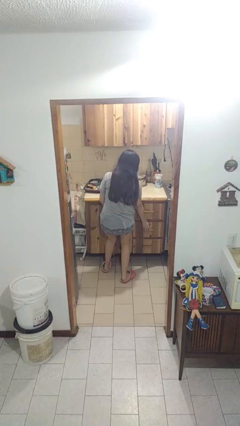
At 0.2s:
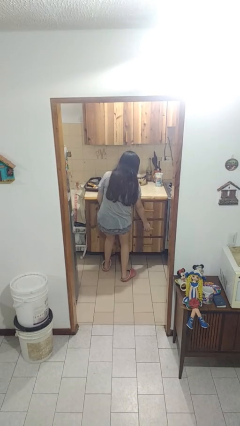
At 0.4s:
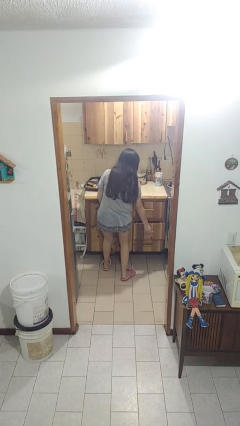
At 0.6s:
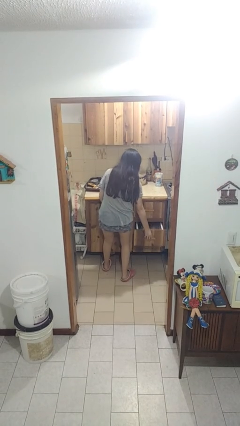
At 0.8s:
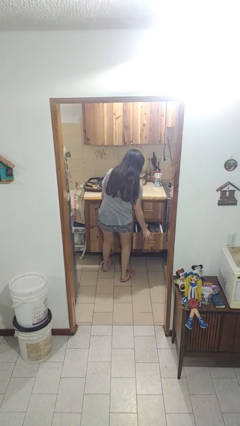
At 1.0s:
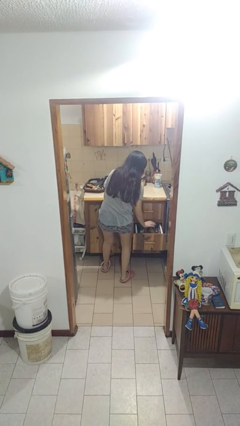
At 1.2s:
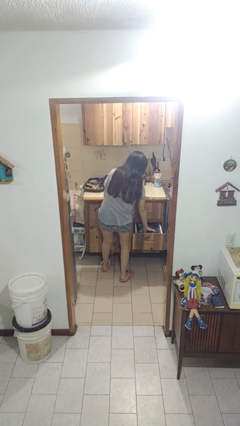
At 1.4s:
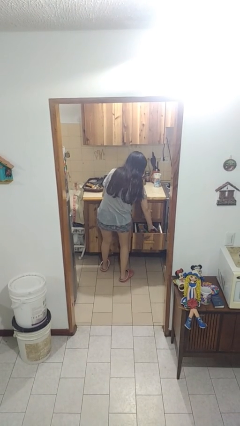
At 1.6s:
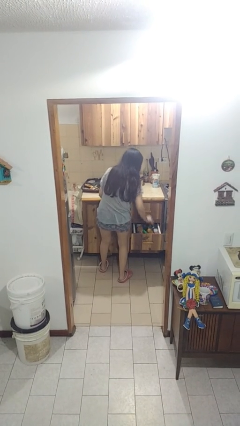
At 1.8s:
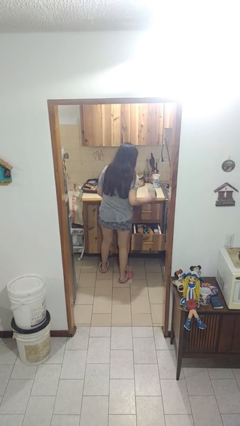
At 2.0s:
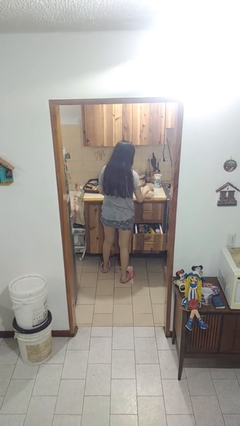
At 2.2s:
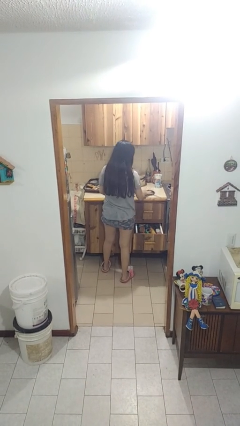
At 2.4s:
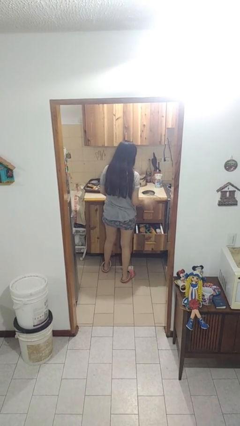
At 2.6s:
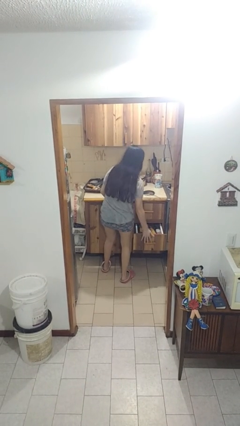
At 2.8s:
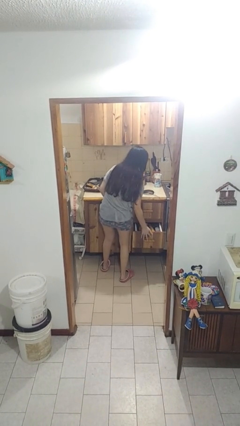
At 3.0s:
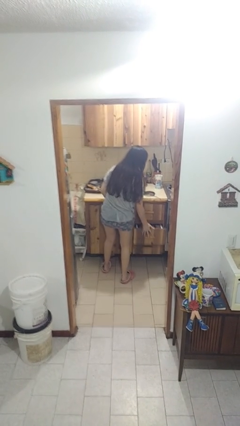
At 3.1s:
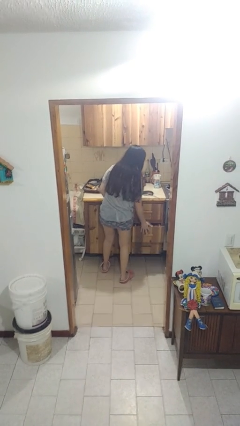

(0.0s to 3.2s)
person takes object from kitchen drawer

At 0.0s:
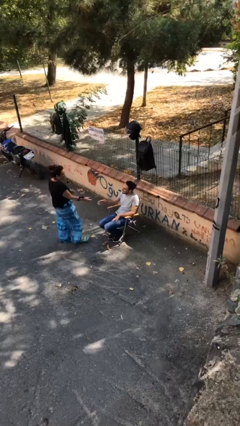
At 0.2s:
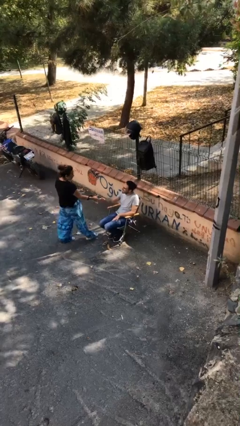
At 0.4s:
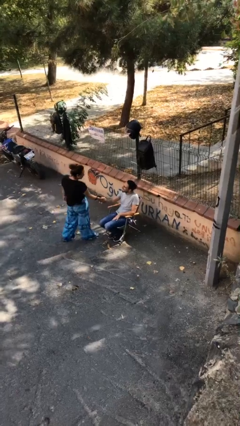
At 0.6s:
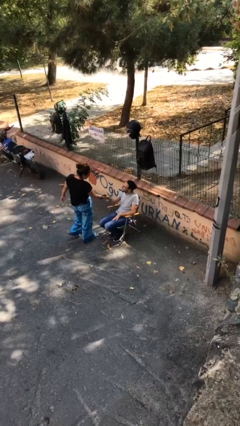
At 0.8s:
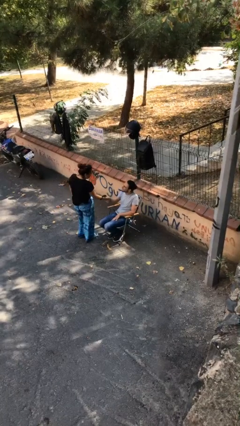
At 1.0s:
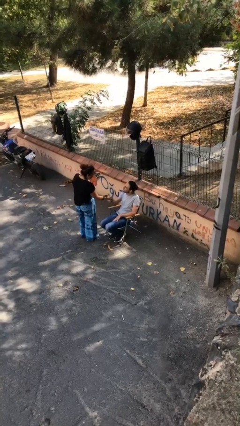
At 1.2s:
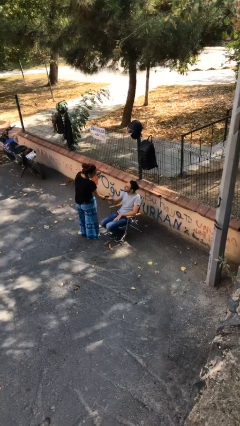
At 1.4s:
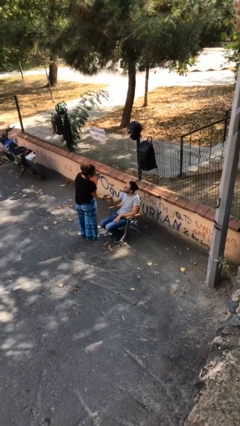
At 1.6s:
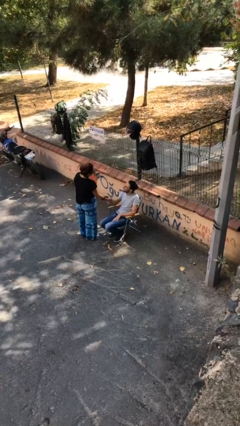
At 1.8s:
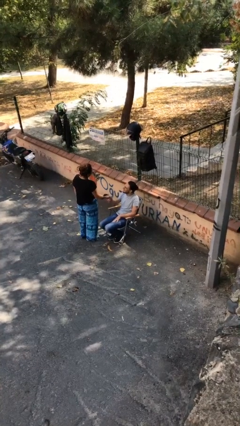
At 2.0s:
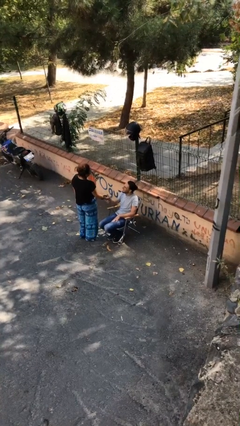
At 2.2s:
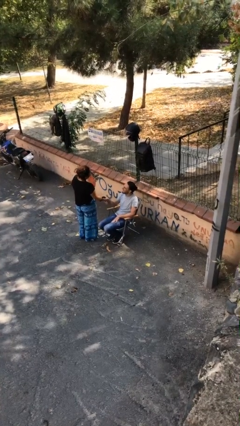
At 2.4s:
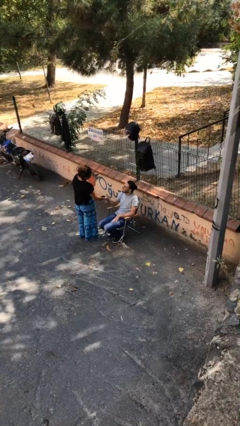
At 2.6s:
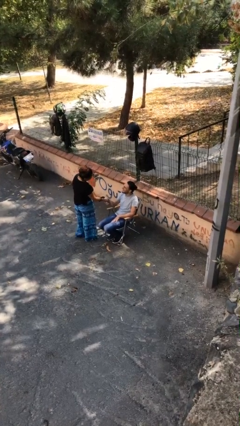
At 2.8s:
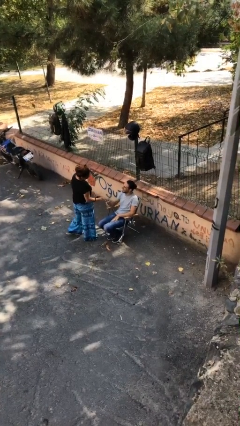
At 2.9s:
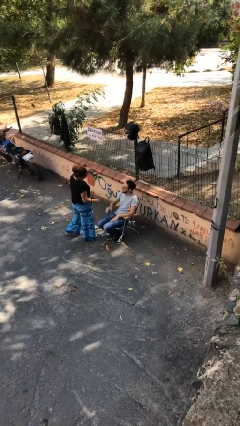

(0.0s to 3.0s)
person shakes hand

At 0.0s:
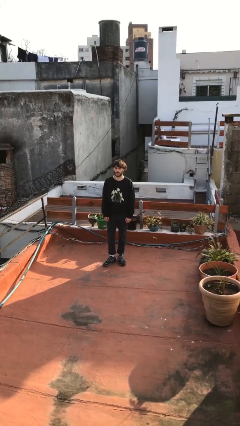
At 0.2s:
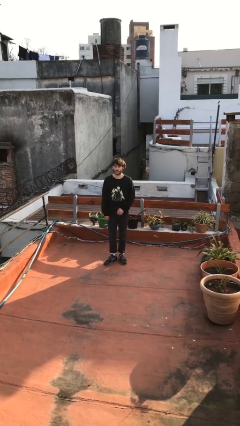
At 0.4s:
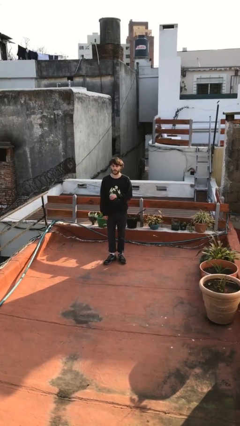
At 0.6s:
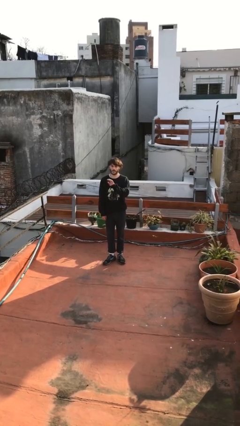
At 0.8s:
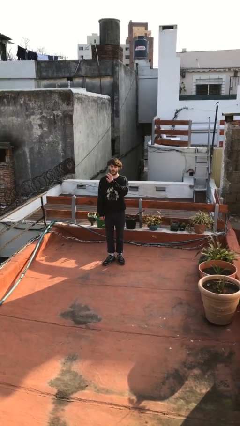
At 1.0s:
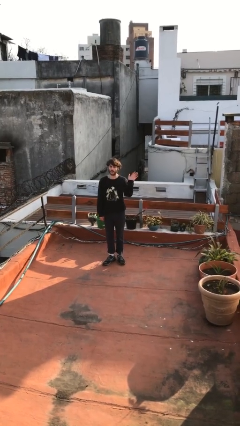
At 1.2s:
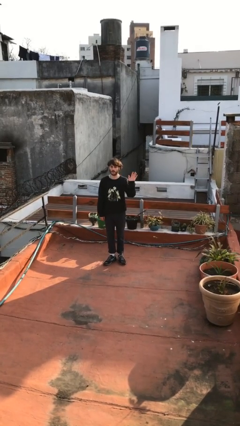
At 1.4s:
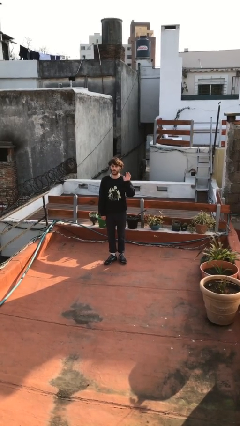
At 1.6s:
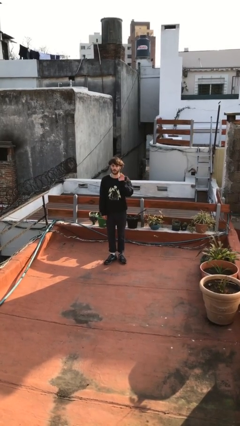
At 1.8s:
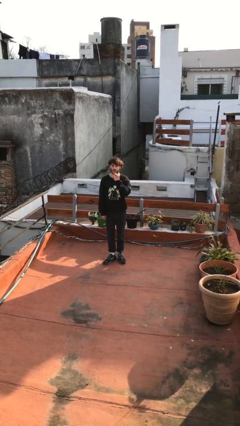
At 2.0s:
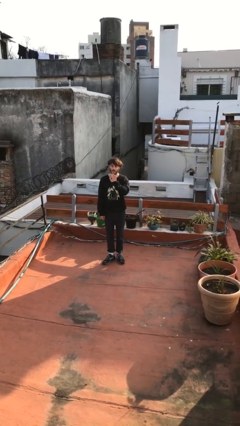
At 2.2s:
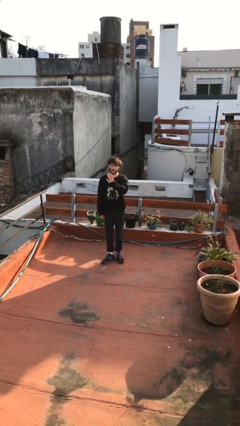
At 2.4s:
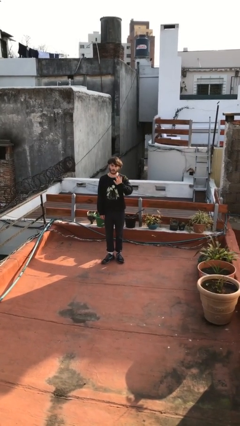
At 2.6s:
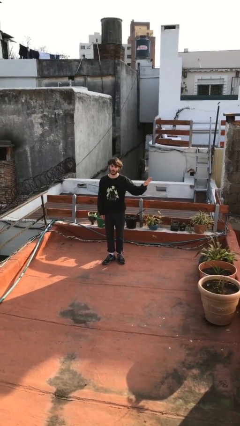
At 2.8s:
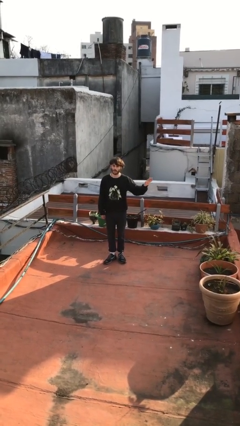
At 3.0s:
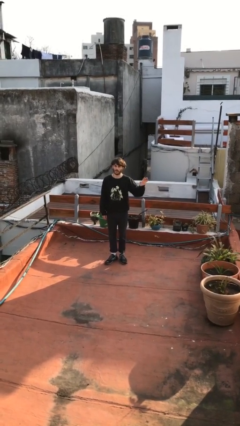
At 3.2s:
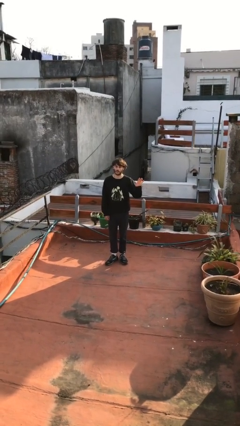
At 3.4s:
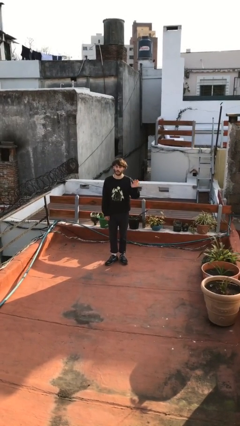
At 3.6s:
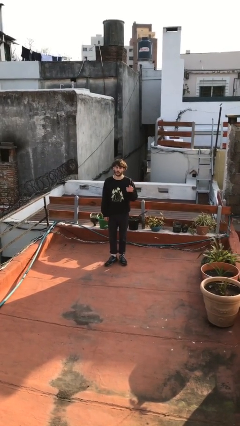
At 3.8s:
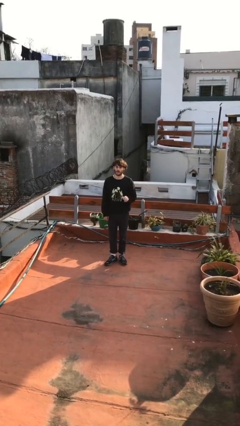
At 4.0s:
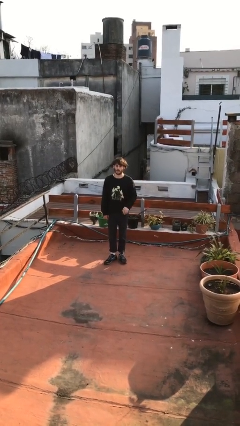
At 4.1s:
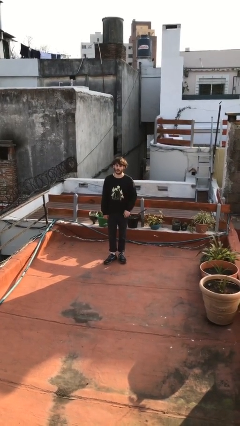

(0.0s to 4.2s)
person gestures swipe left

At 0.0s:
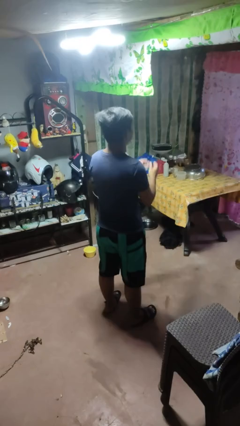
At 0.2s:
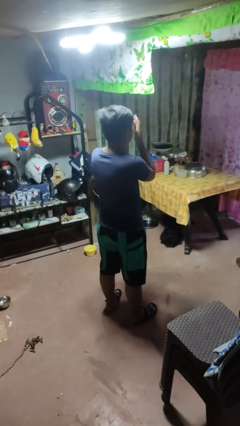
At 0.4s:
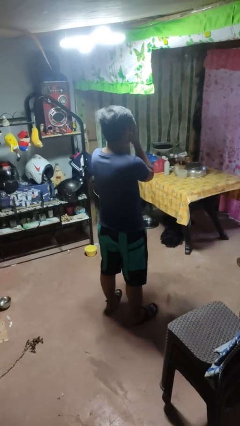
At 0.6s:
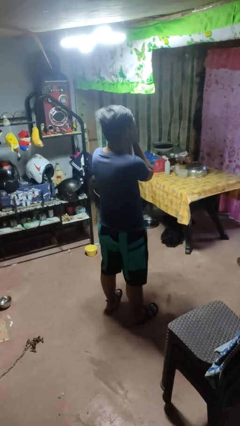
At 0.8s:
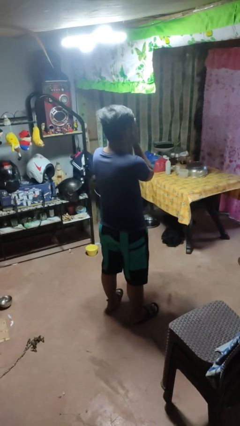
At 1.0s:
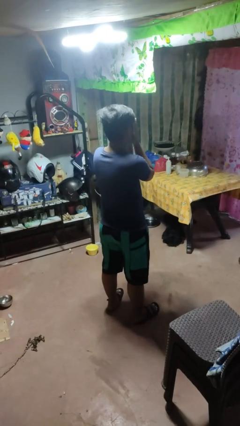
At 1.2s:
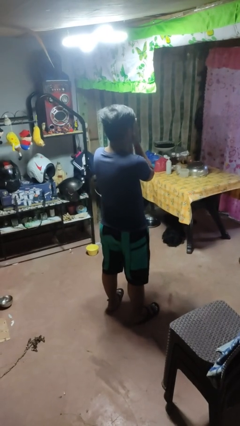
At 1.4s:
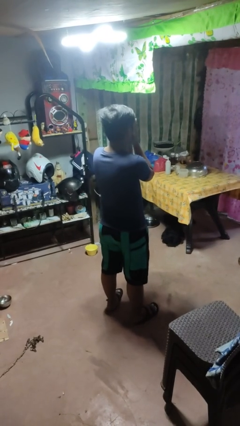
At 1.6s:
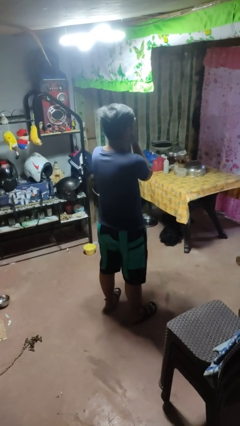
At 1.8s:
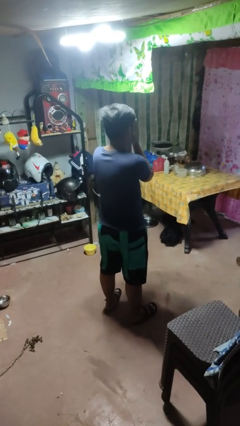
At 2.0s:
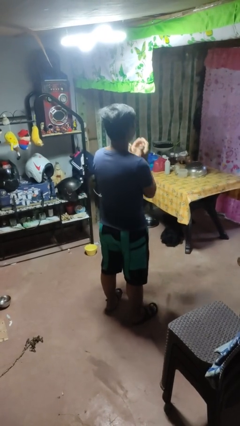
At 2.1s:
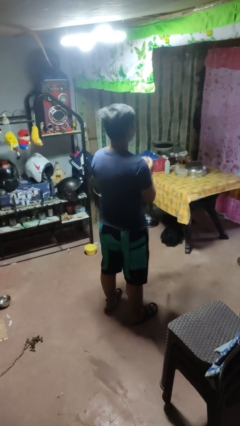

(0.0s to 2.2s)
person covers face with hands

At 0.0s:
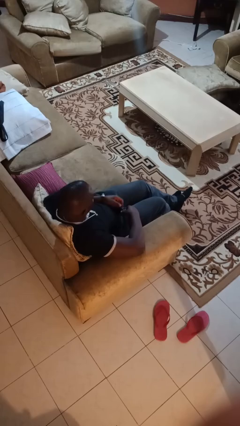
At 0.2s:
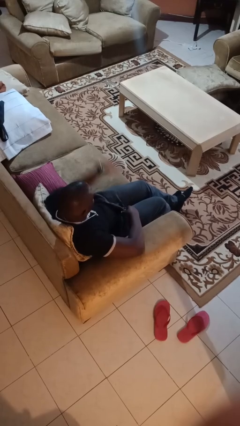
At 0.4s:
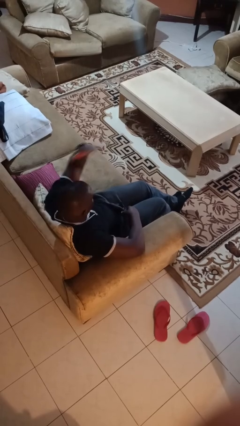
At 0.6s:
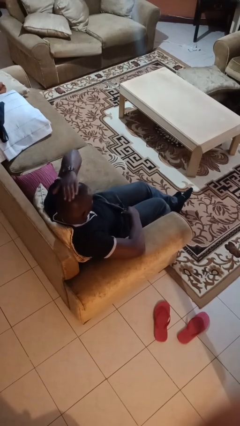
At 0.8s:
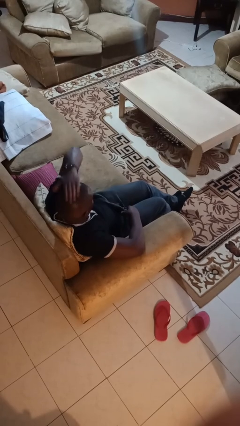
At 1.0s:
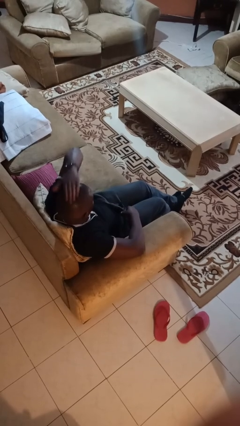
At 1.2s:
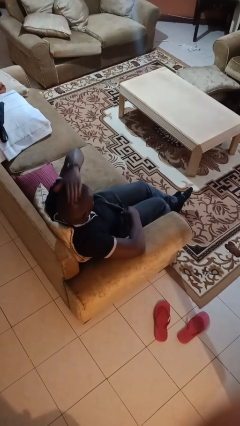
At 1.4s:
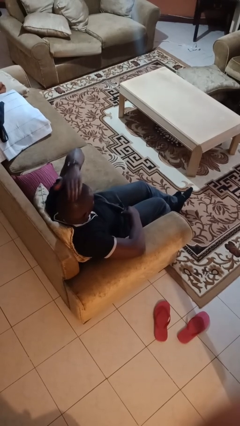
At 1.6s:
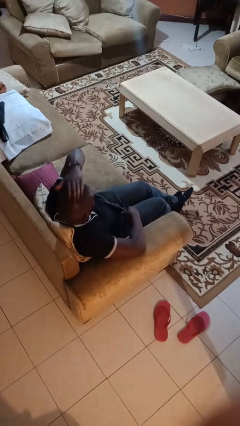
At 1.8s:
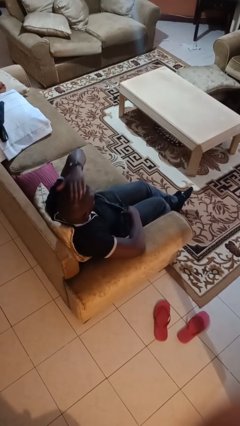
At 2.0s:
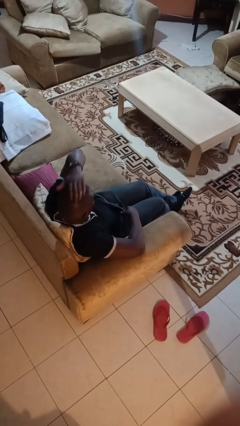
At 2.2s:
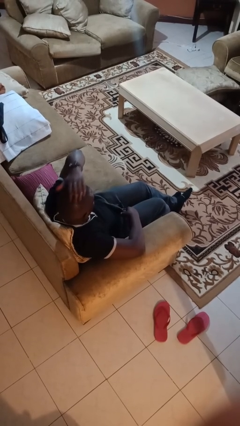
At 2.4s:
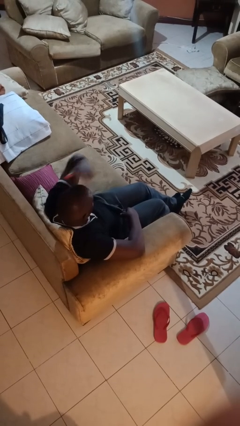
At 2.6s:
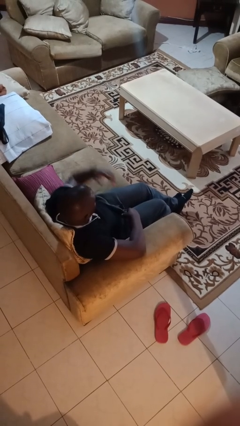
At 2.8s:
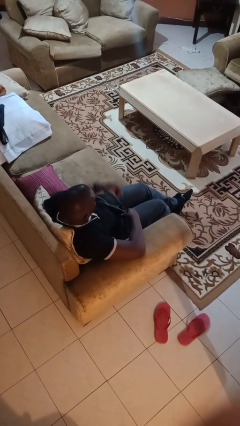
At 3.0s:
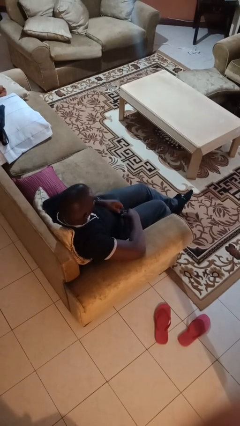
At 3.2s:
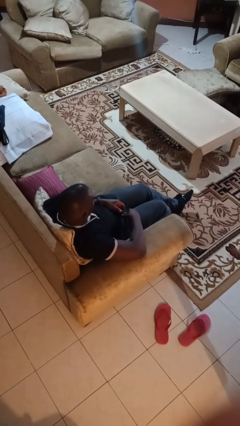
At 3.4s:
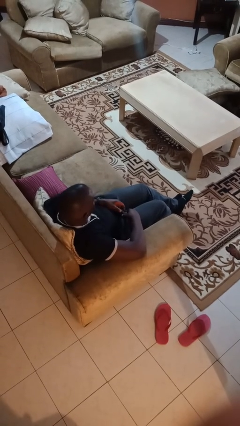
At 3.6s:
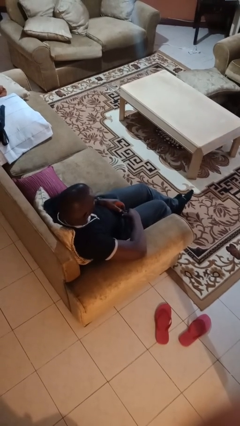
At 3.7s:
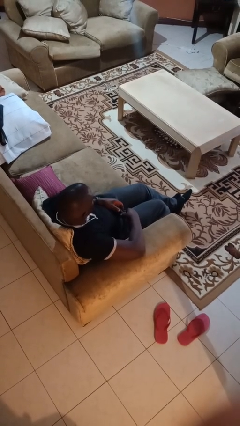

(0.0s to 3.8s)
person pats head

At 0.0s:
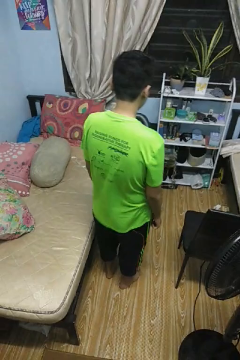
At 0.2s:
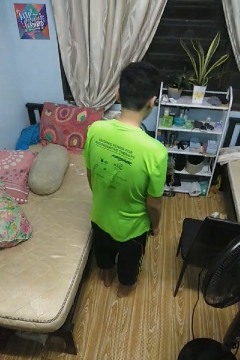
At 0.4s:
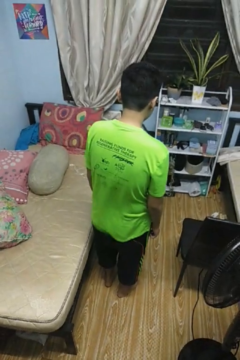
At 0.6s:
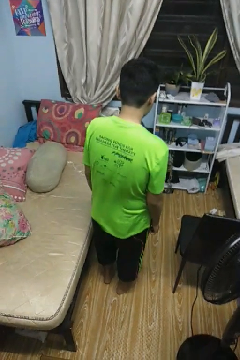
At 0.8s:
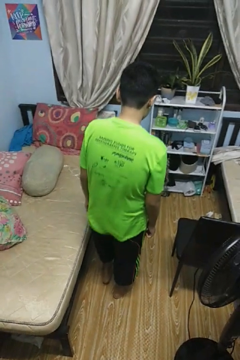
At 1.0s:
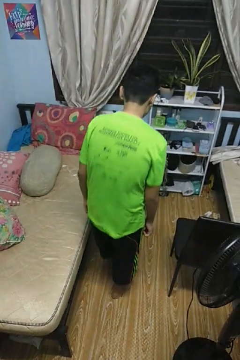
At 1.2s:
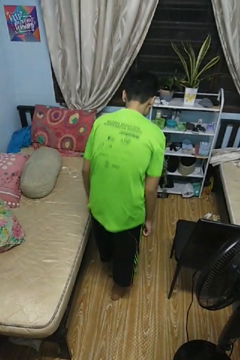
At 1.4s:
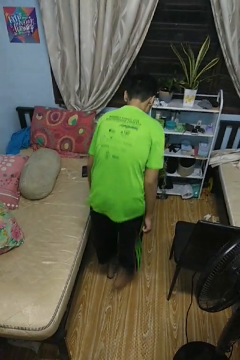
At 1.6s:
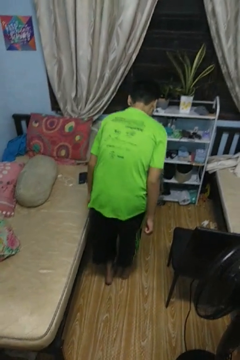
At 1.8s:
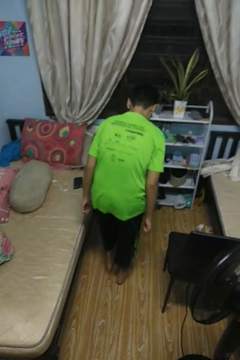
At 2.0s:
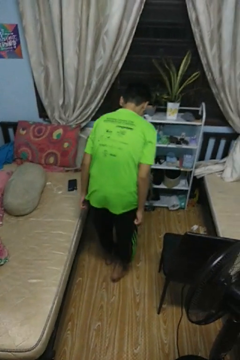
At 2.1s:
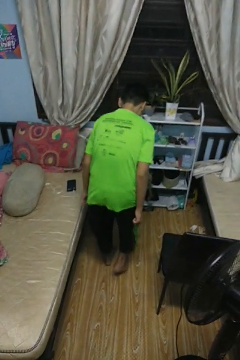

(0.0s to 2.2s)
person walks tiptoe
